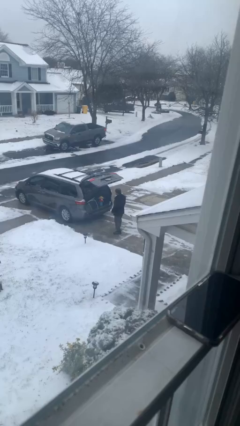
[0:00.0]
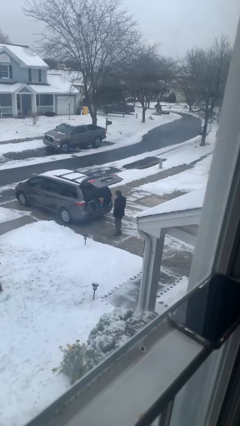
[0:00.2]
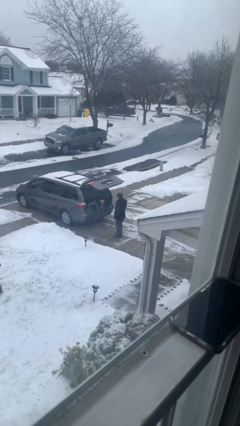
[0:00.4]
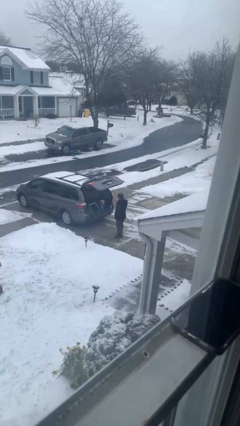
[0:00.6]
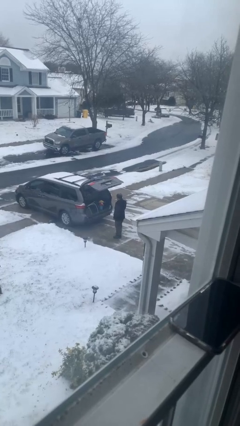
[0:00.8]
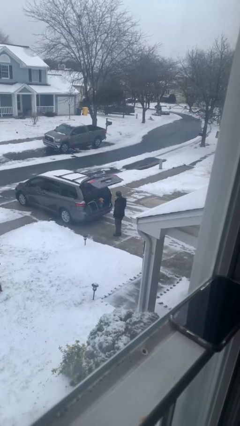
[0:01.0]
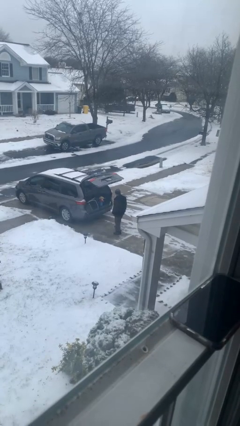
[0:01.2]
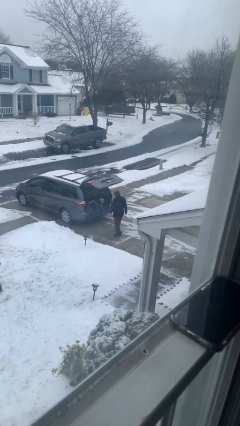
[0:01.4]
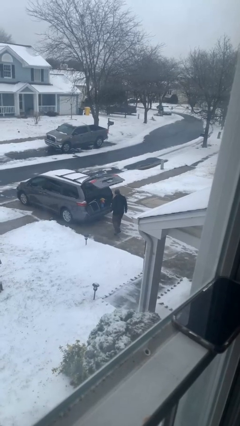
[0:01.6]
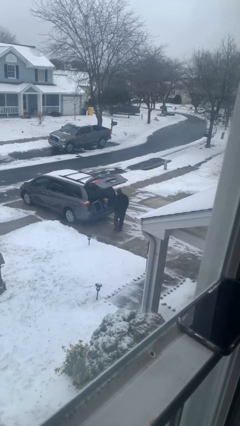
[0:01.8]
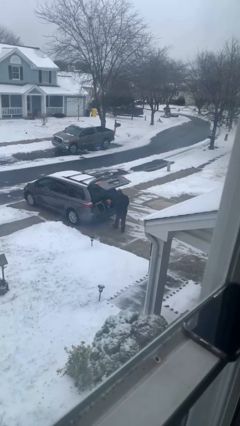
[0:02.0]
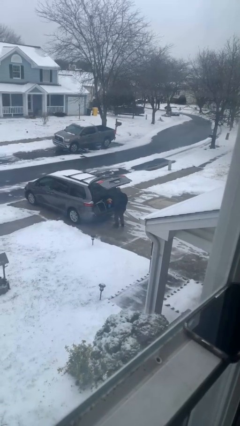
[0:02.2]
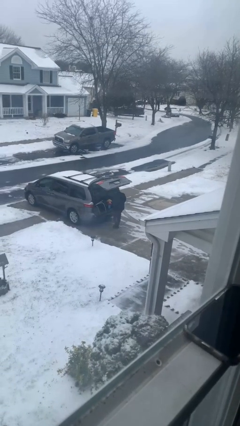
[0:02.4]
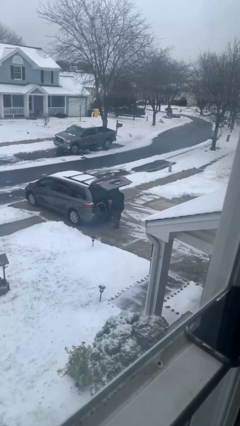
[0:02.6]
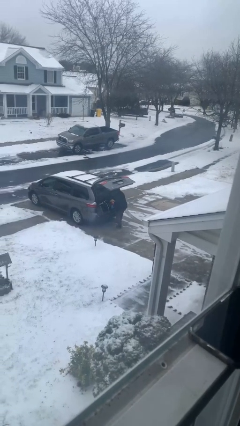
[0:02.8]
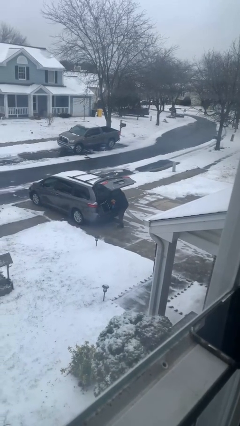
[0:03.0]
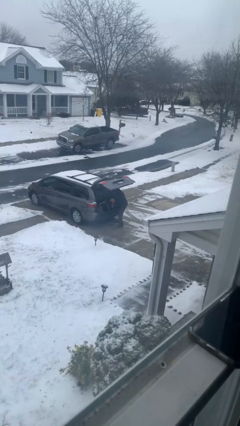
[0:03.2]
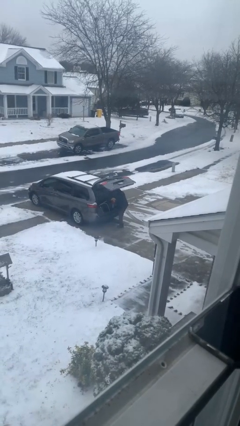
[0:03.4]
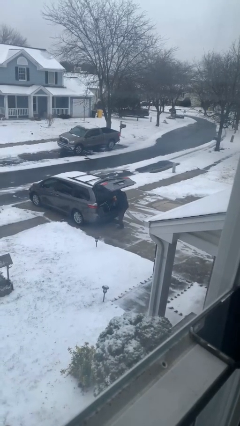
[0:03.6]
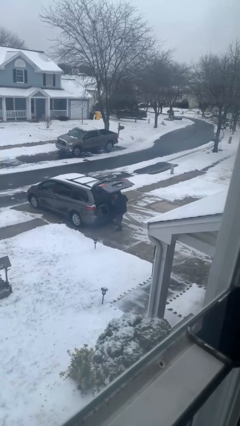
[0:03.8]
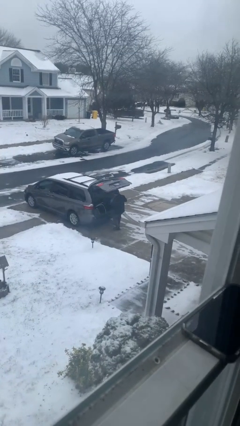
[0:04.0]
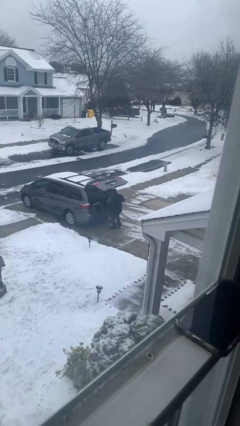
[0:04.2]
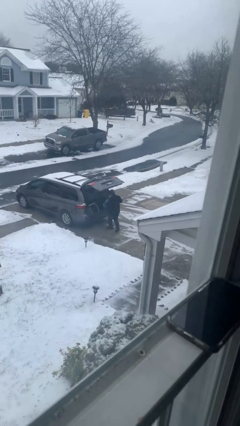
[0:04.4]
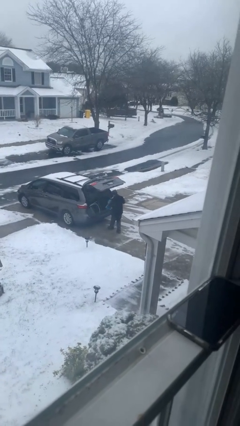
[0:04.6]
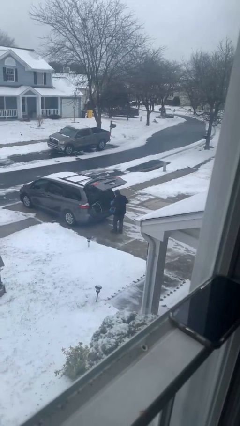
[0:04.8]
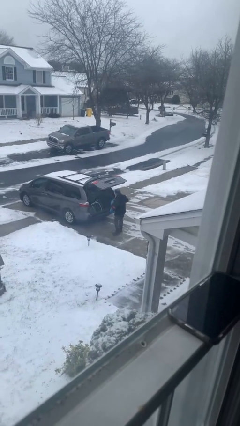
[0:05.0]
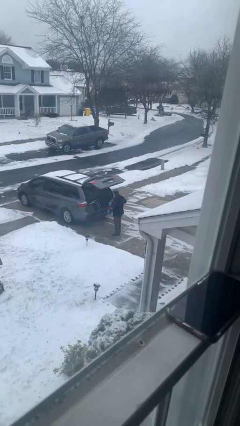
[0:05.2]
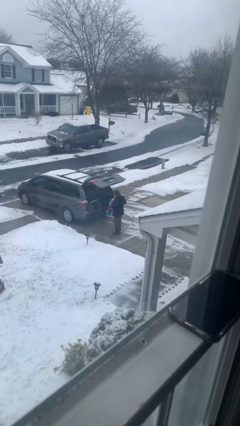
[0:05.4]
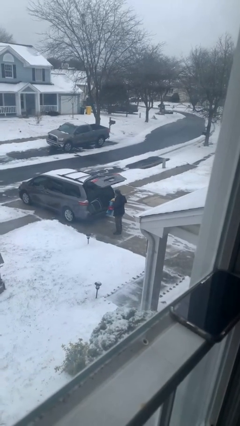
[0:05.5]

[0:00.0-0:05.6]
person unloads car

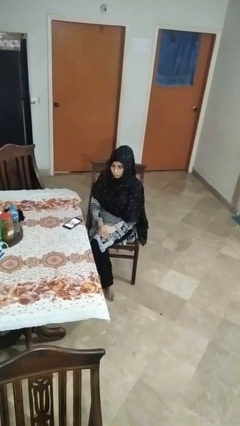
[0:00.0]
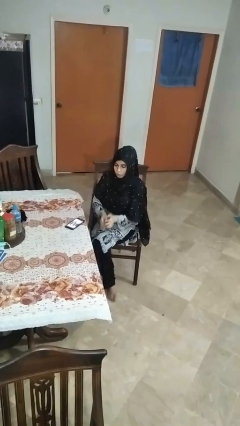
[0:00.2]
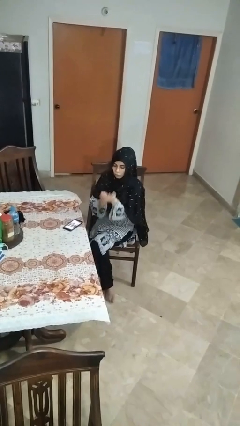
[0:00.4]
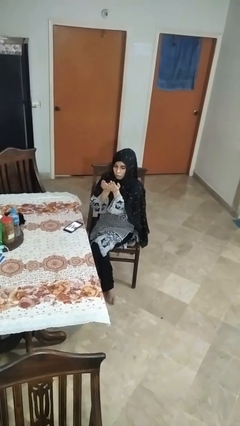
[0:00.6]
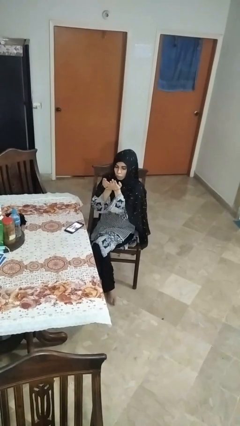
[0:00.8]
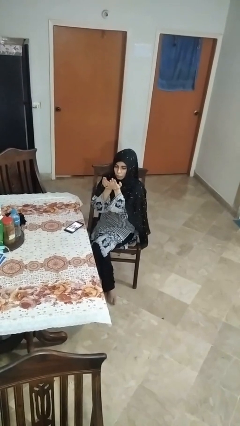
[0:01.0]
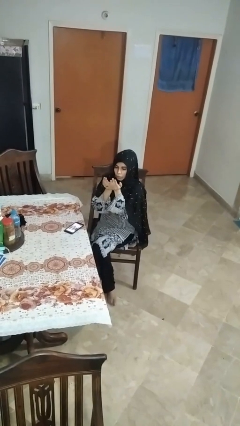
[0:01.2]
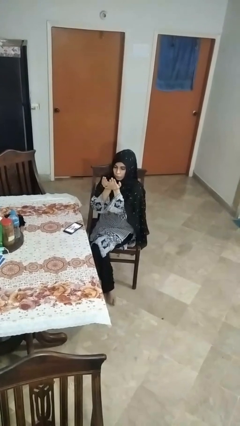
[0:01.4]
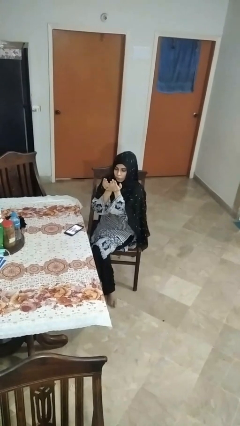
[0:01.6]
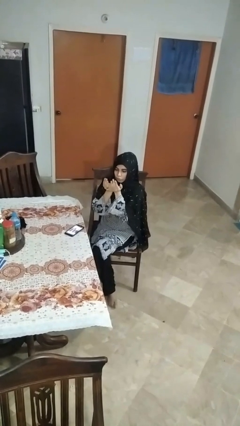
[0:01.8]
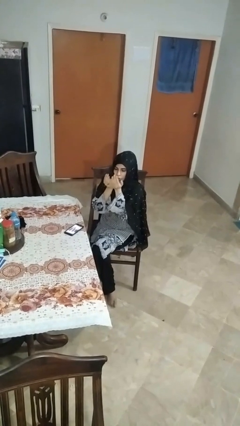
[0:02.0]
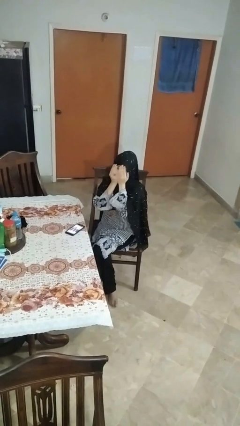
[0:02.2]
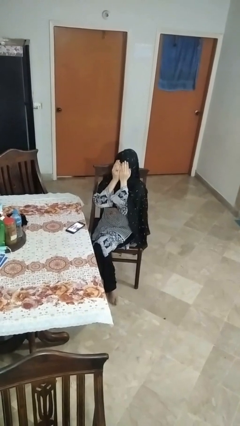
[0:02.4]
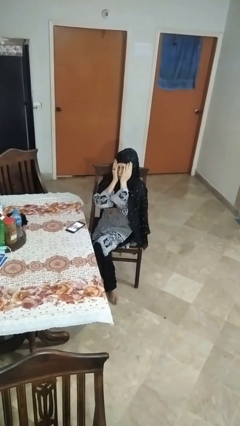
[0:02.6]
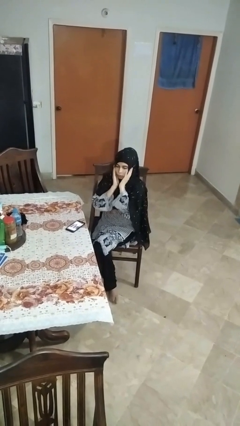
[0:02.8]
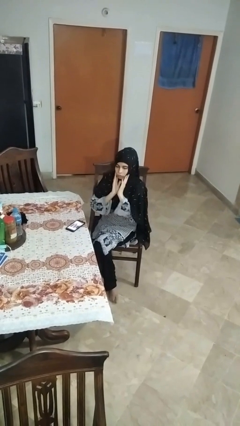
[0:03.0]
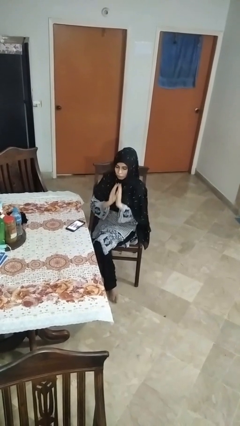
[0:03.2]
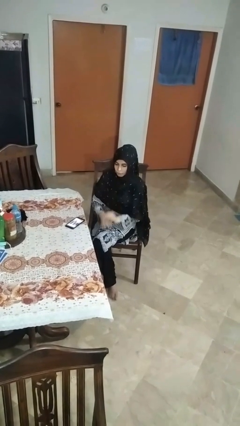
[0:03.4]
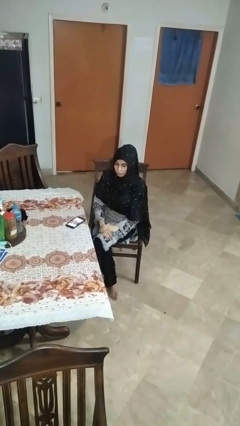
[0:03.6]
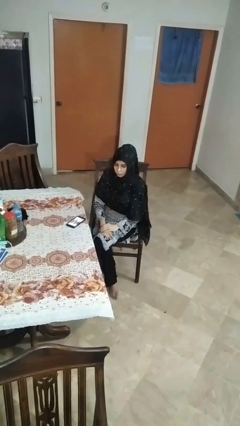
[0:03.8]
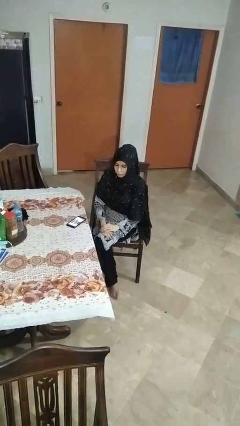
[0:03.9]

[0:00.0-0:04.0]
person prays

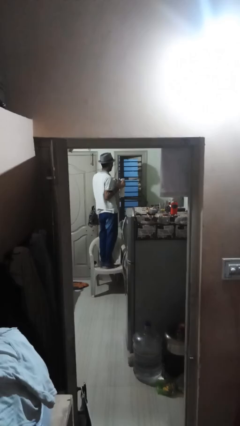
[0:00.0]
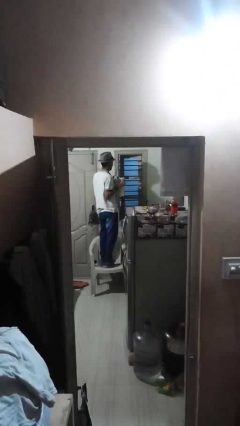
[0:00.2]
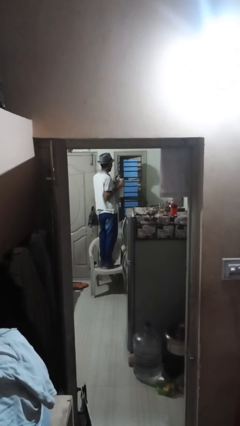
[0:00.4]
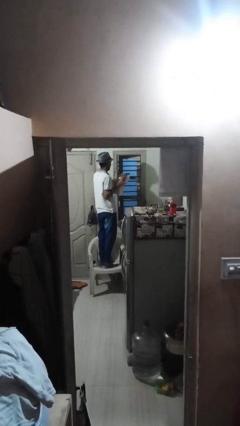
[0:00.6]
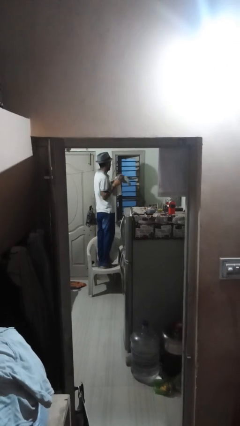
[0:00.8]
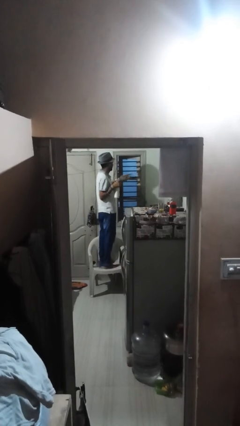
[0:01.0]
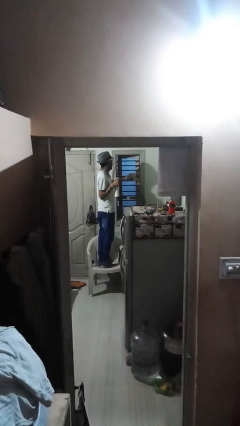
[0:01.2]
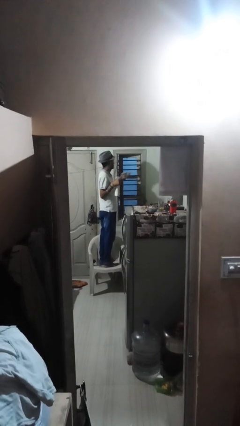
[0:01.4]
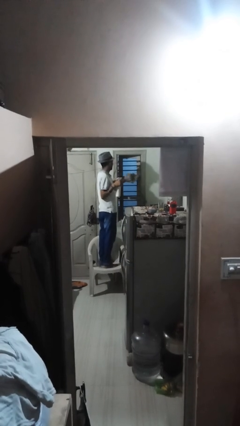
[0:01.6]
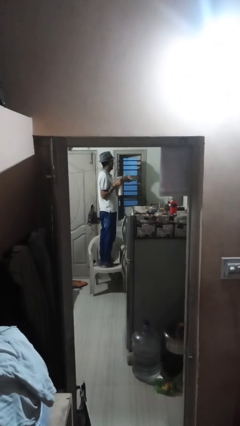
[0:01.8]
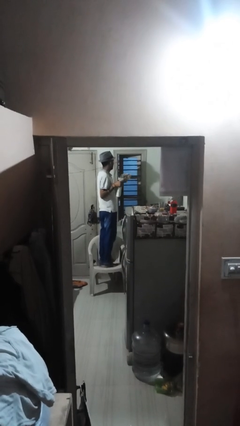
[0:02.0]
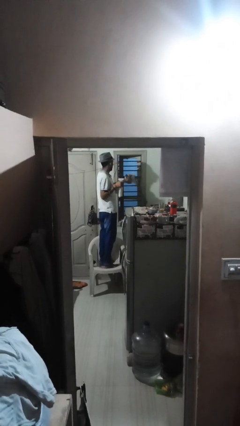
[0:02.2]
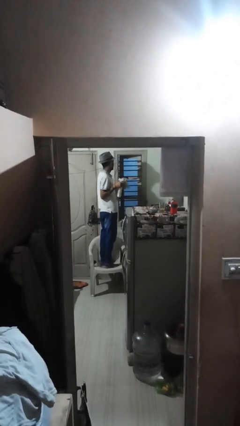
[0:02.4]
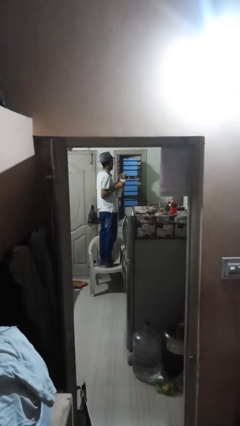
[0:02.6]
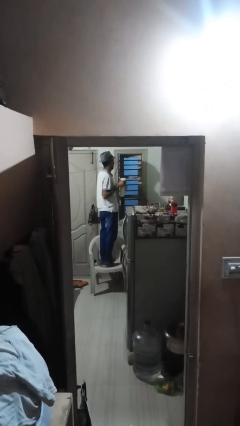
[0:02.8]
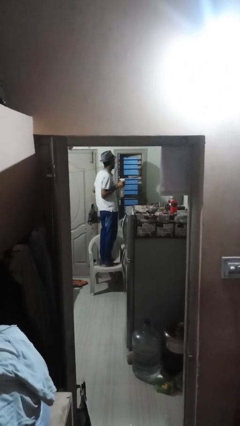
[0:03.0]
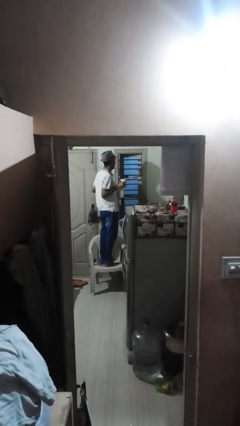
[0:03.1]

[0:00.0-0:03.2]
person washes window

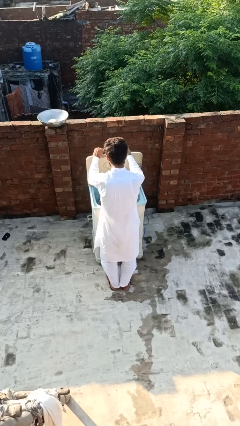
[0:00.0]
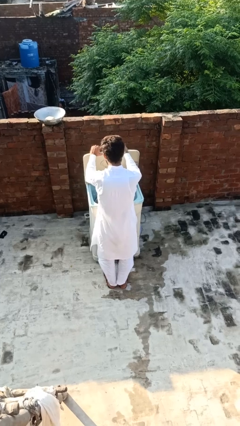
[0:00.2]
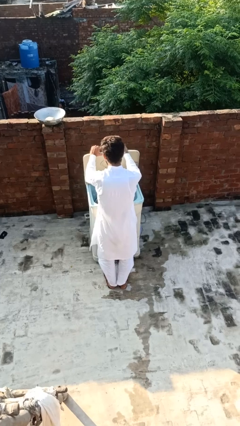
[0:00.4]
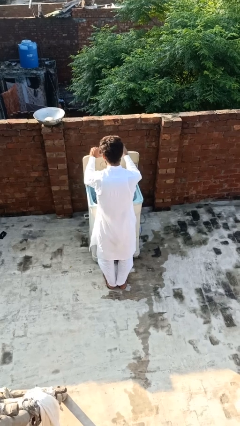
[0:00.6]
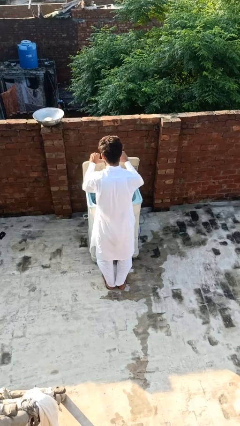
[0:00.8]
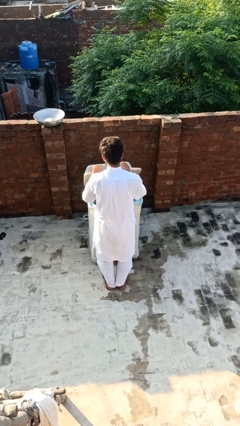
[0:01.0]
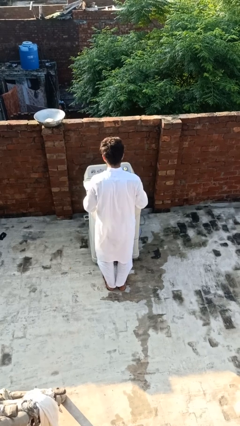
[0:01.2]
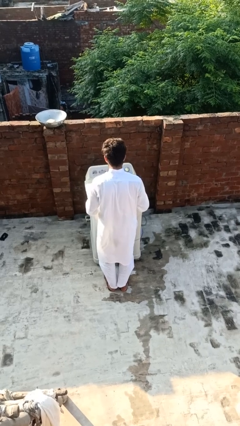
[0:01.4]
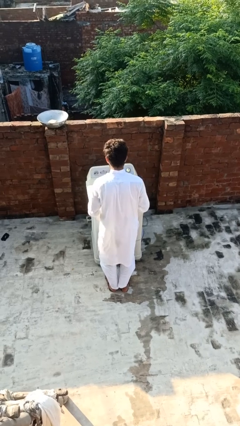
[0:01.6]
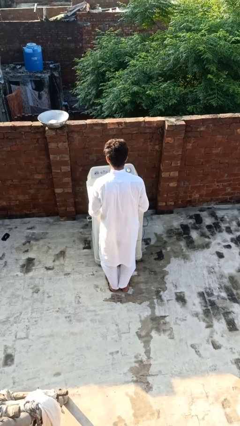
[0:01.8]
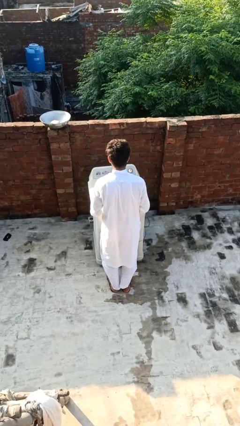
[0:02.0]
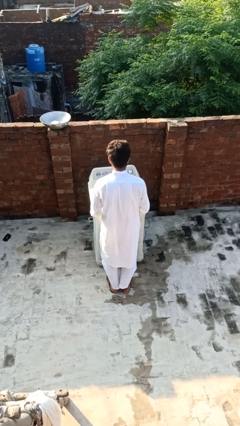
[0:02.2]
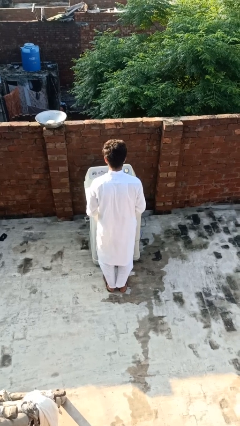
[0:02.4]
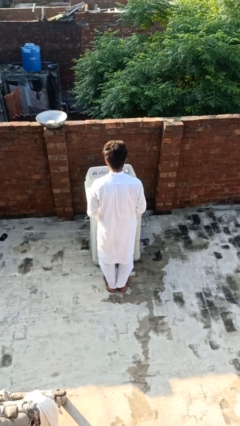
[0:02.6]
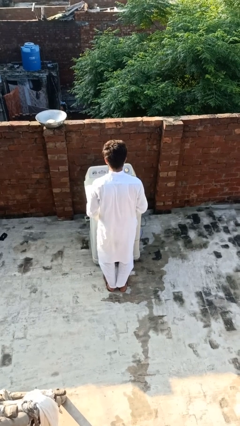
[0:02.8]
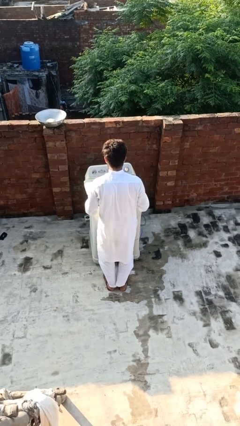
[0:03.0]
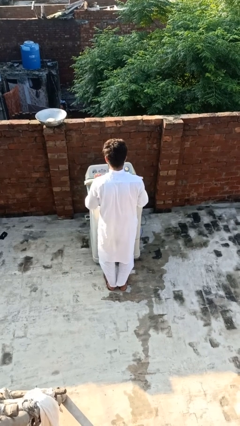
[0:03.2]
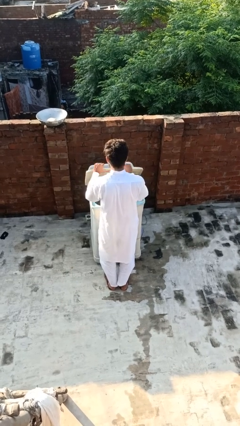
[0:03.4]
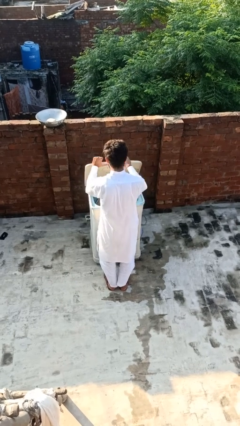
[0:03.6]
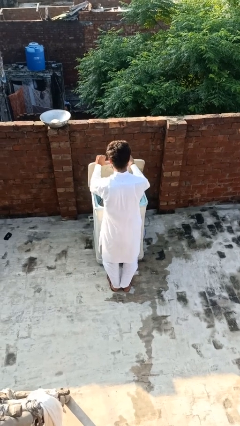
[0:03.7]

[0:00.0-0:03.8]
person closes clothes washer

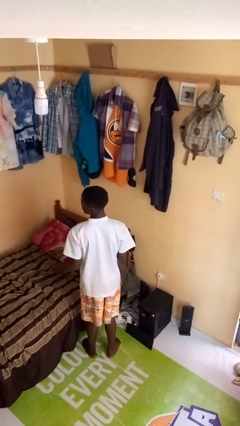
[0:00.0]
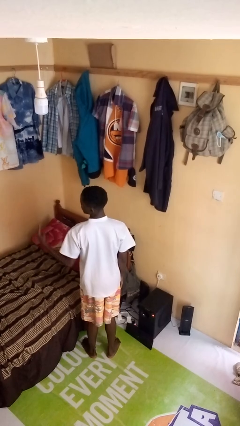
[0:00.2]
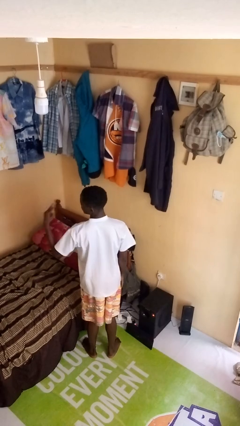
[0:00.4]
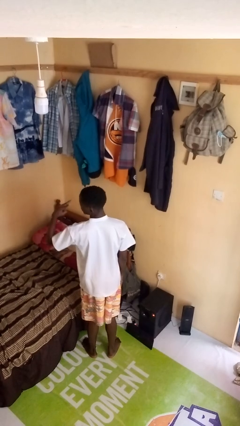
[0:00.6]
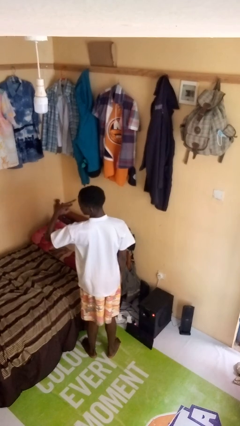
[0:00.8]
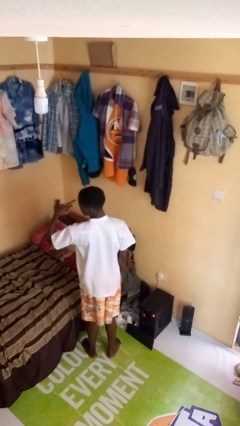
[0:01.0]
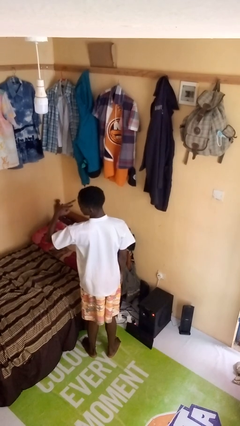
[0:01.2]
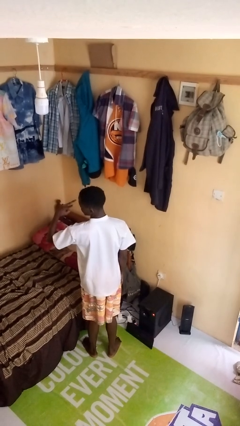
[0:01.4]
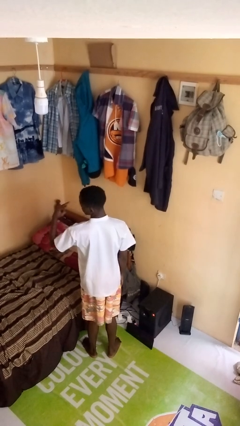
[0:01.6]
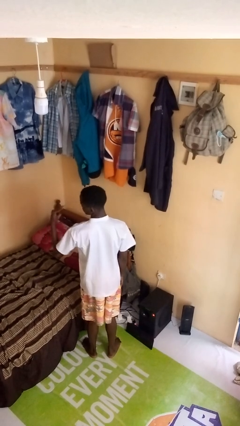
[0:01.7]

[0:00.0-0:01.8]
person gestures watch closely
